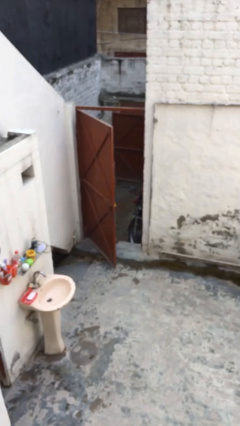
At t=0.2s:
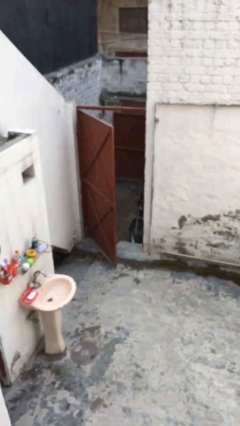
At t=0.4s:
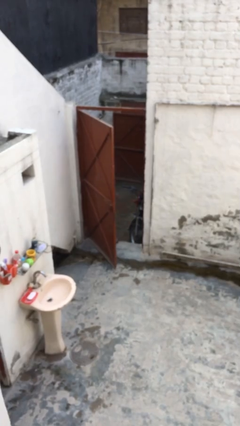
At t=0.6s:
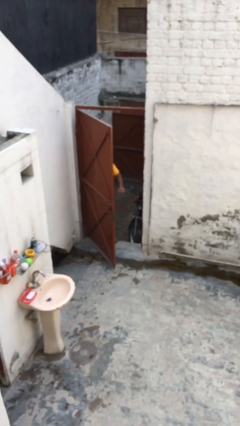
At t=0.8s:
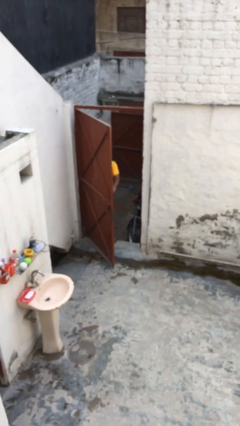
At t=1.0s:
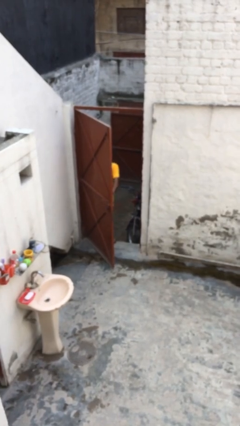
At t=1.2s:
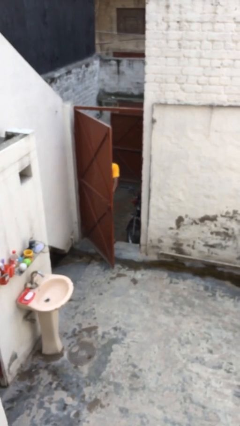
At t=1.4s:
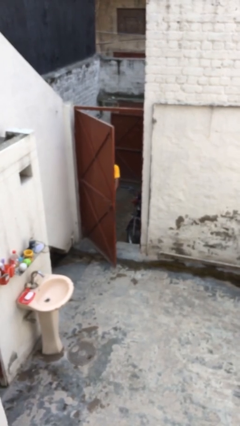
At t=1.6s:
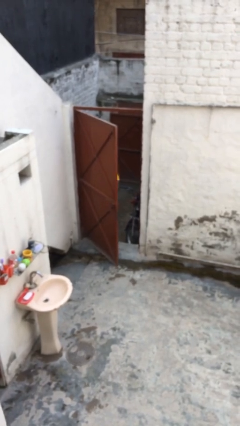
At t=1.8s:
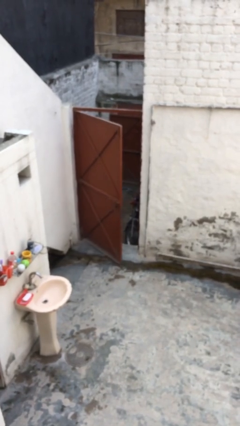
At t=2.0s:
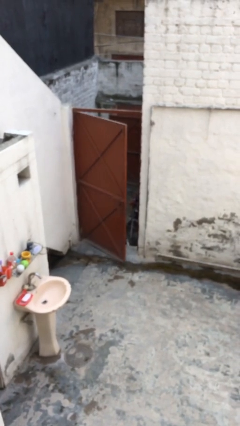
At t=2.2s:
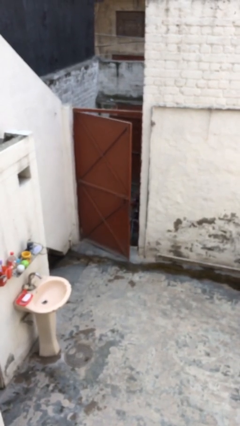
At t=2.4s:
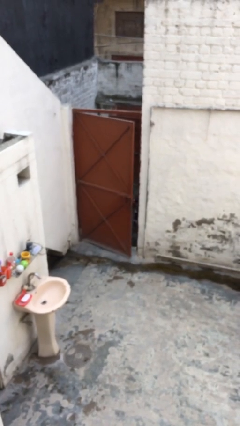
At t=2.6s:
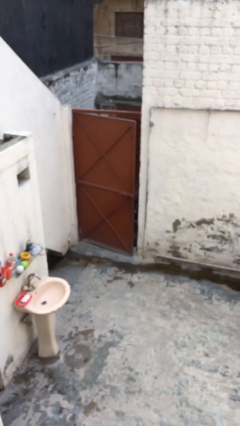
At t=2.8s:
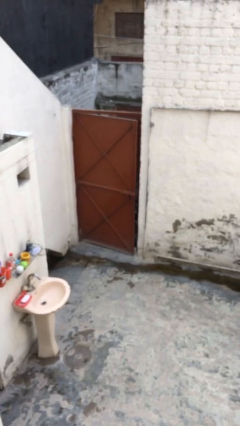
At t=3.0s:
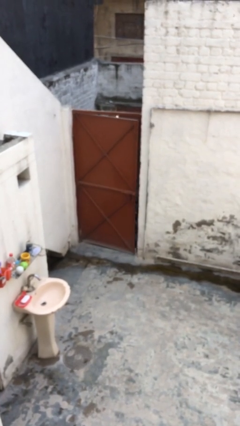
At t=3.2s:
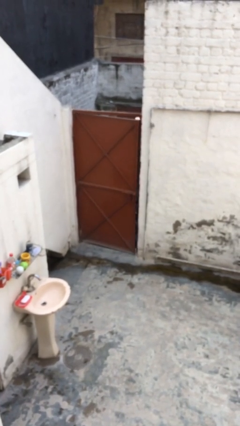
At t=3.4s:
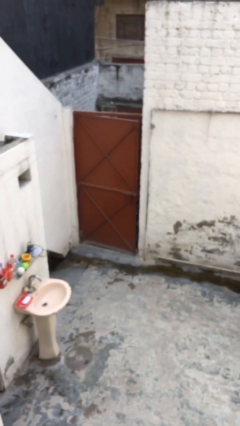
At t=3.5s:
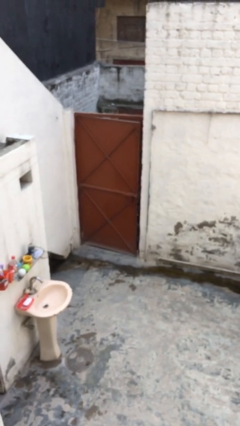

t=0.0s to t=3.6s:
person closes facility door

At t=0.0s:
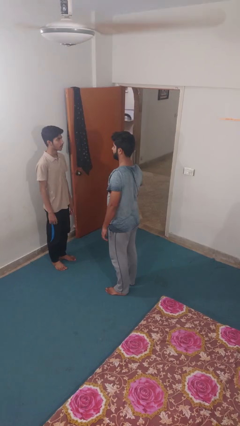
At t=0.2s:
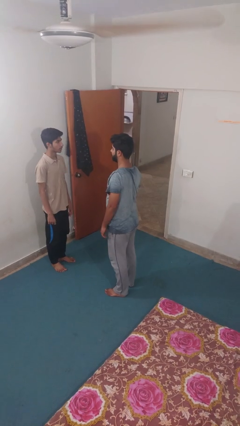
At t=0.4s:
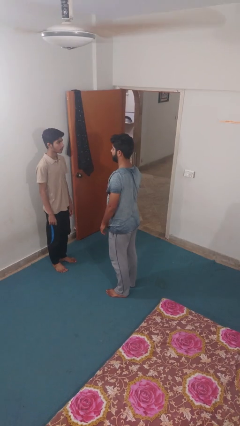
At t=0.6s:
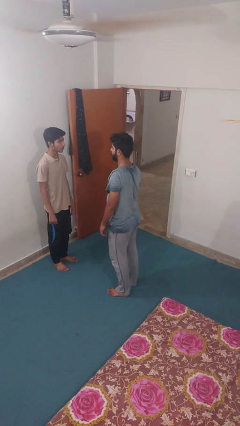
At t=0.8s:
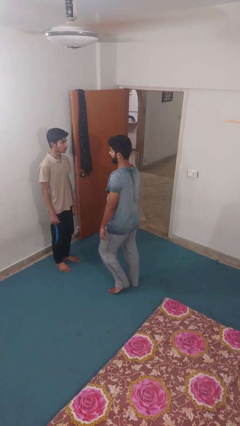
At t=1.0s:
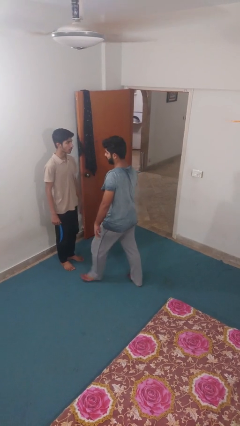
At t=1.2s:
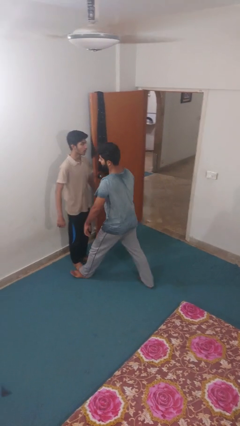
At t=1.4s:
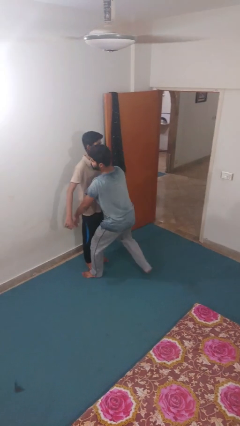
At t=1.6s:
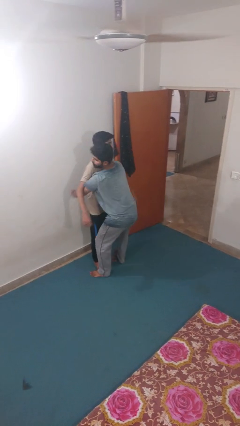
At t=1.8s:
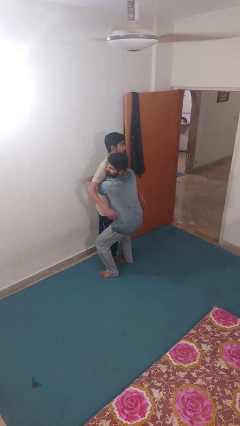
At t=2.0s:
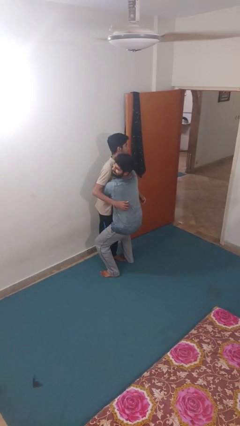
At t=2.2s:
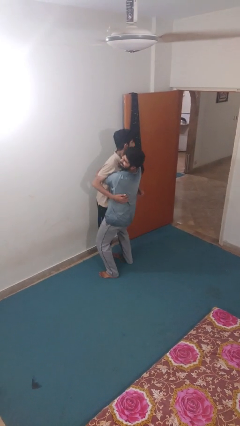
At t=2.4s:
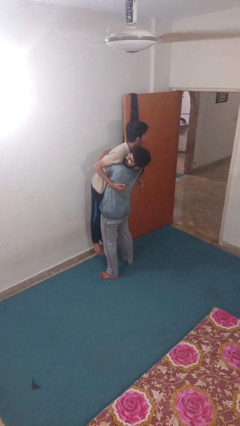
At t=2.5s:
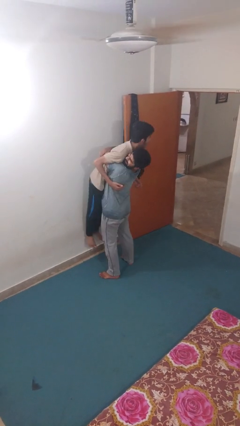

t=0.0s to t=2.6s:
person picks up person

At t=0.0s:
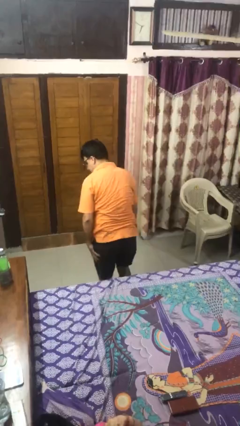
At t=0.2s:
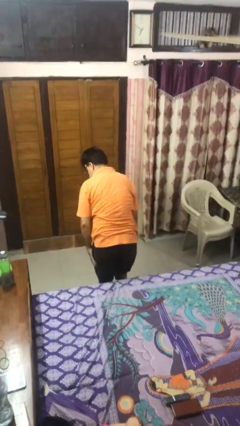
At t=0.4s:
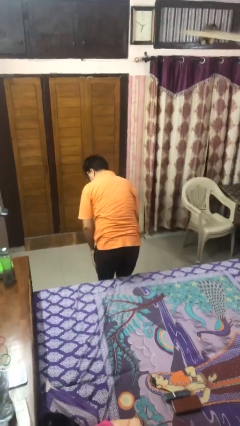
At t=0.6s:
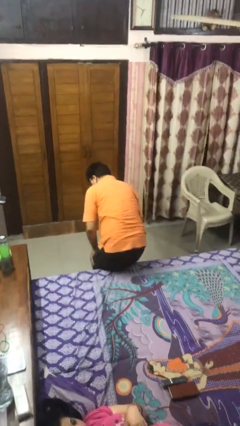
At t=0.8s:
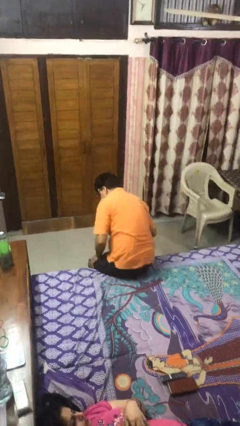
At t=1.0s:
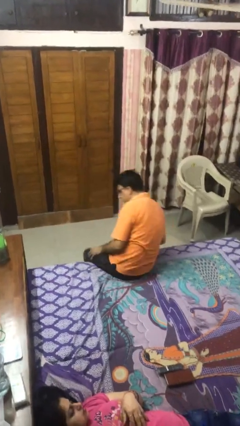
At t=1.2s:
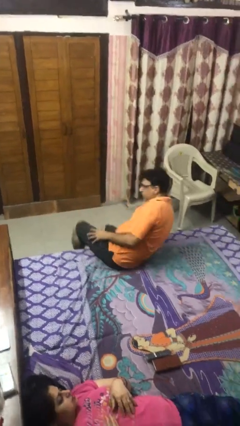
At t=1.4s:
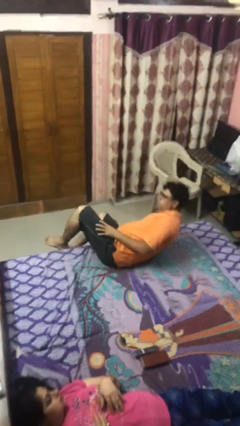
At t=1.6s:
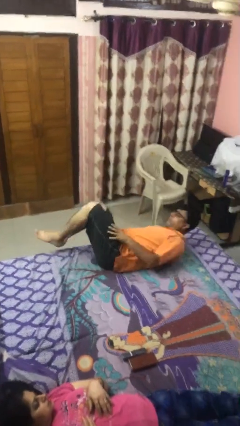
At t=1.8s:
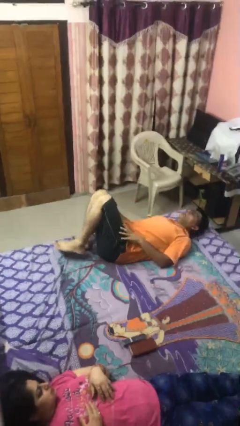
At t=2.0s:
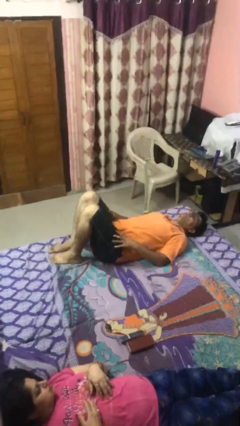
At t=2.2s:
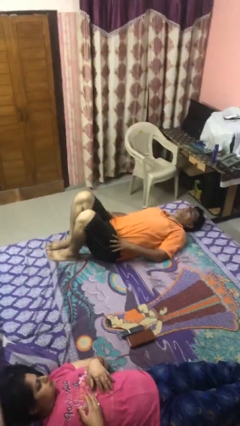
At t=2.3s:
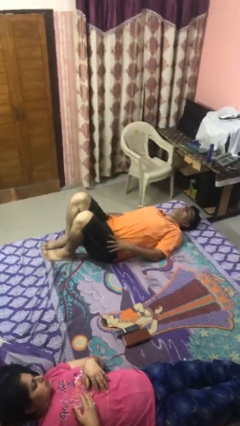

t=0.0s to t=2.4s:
person lies down on bed

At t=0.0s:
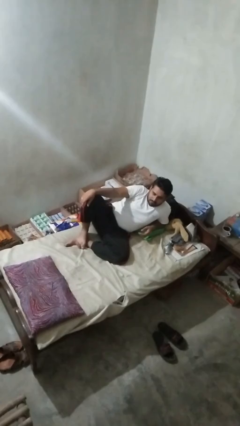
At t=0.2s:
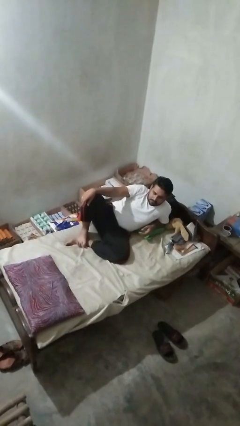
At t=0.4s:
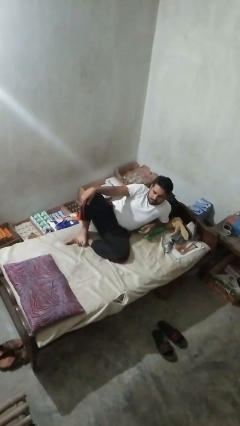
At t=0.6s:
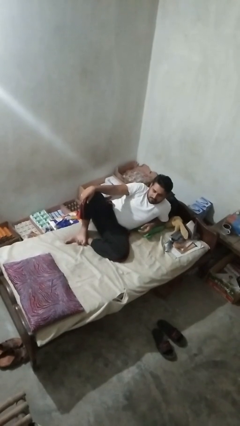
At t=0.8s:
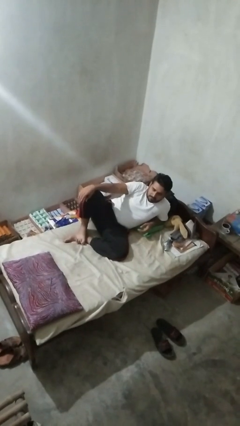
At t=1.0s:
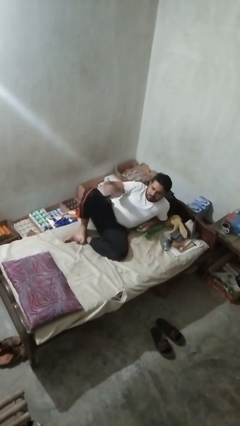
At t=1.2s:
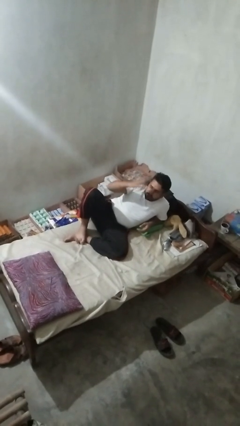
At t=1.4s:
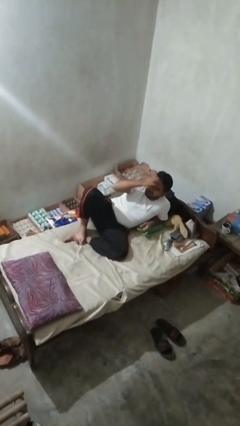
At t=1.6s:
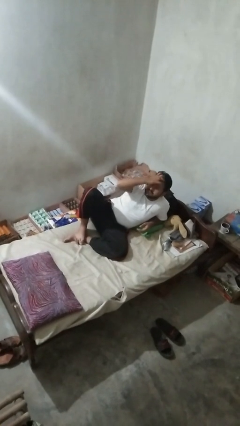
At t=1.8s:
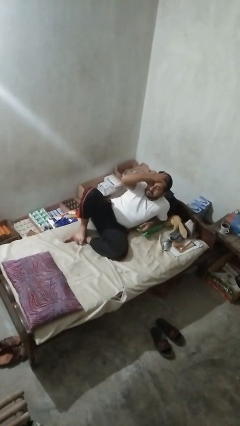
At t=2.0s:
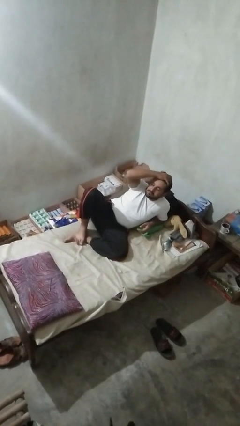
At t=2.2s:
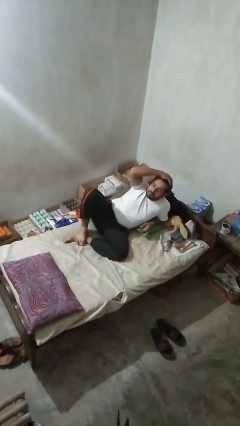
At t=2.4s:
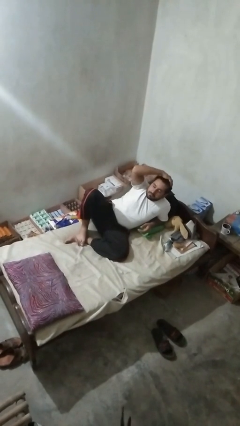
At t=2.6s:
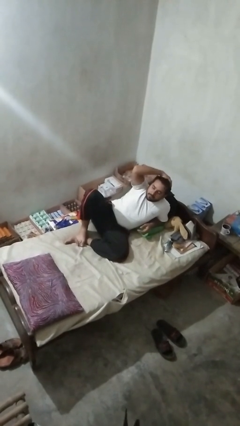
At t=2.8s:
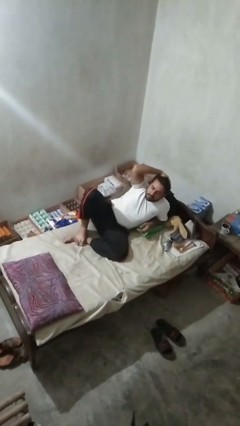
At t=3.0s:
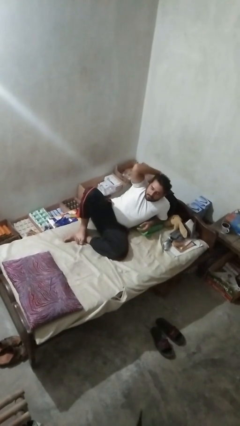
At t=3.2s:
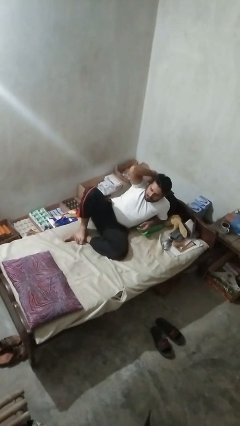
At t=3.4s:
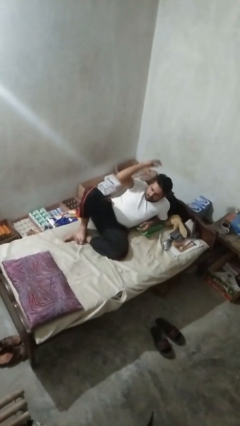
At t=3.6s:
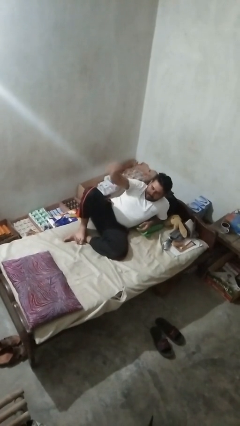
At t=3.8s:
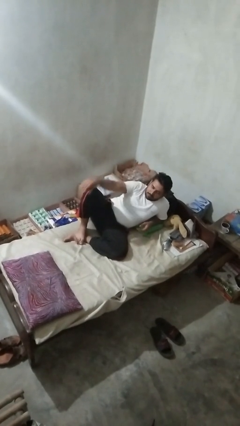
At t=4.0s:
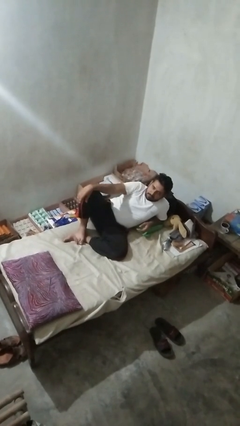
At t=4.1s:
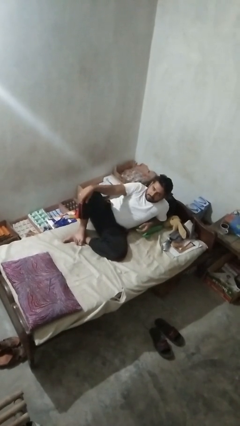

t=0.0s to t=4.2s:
person strokes hair

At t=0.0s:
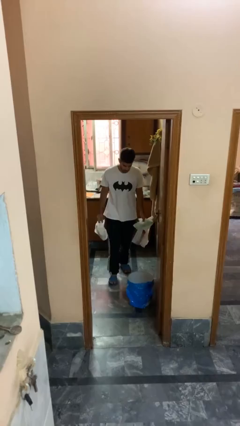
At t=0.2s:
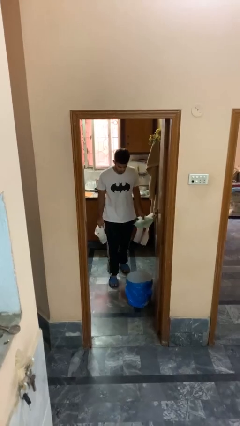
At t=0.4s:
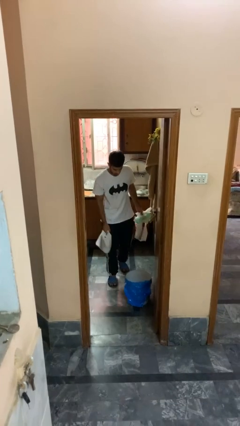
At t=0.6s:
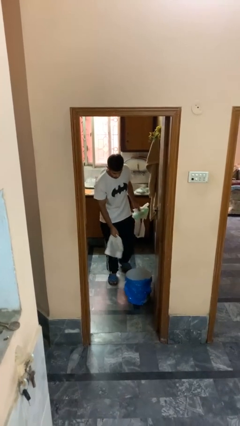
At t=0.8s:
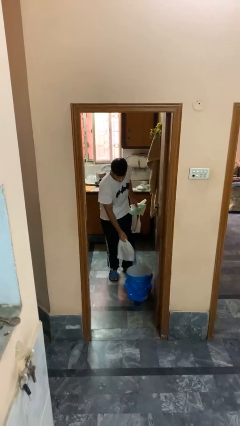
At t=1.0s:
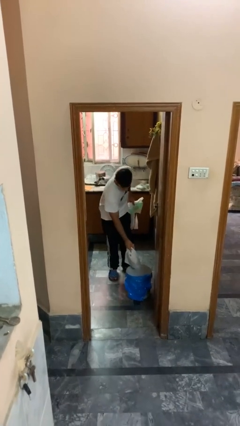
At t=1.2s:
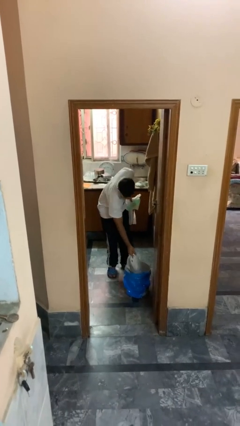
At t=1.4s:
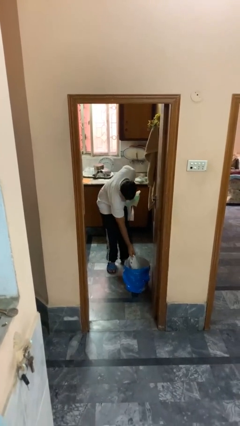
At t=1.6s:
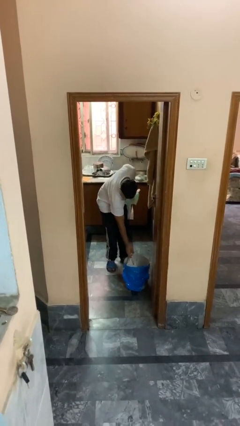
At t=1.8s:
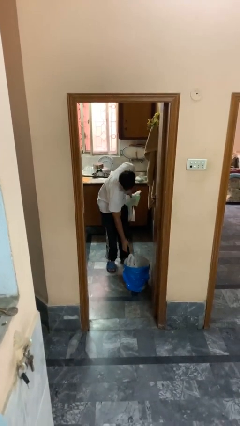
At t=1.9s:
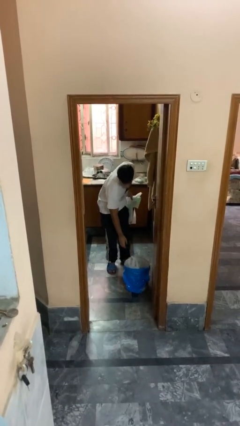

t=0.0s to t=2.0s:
person discards trash

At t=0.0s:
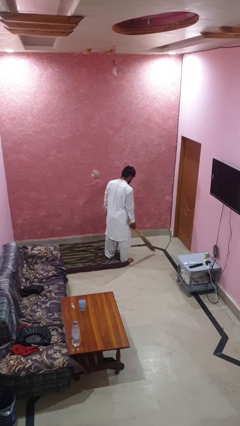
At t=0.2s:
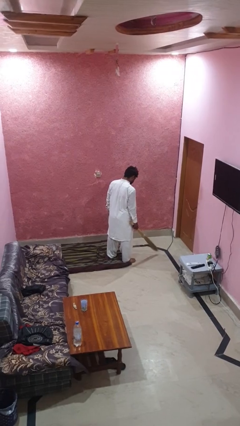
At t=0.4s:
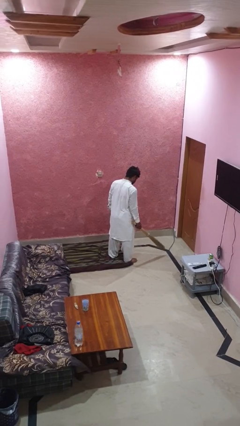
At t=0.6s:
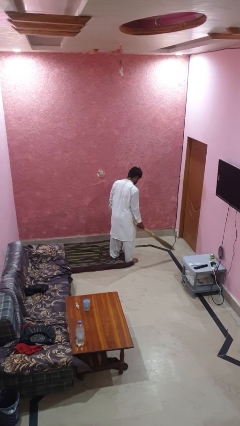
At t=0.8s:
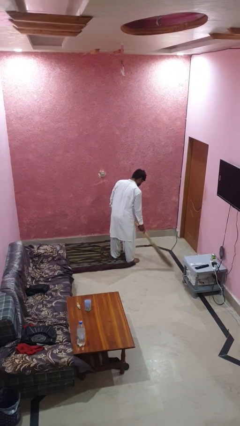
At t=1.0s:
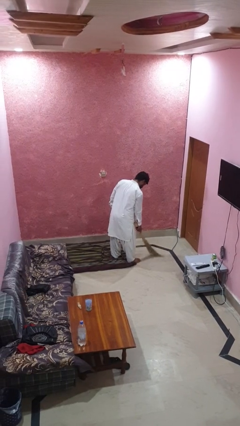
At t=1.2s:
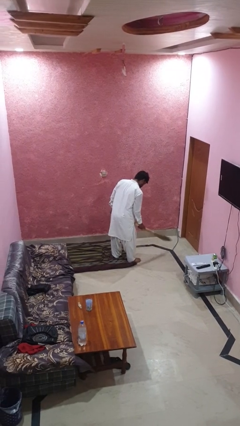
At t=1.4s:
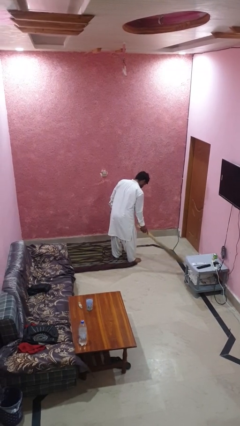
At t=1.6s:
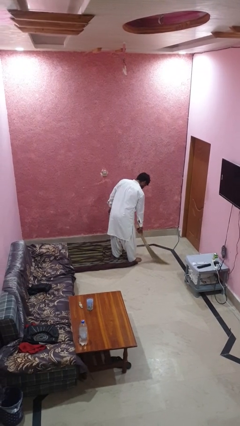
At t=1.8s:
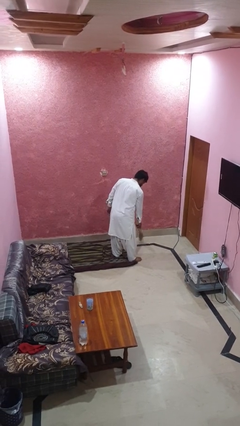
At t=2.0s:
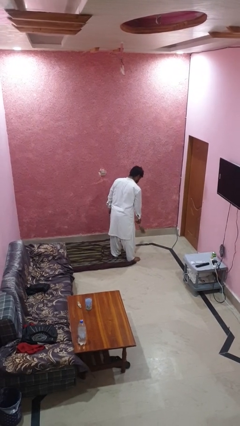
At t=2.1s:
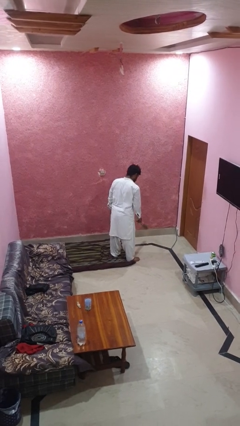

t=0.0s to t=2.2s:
person sweeps floor
